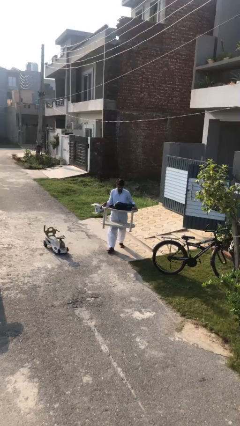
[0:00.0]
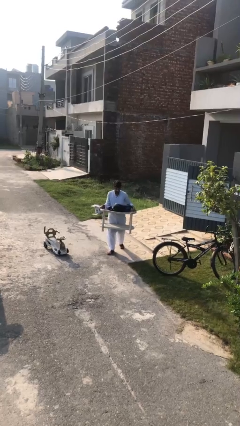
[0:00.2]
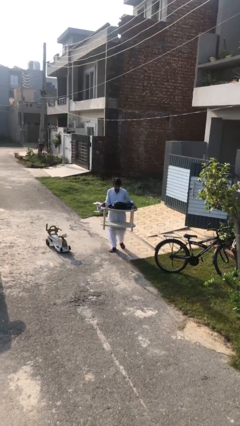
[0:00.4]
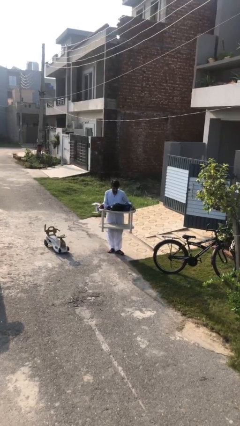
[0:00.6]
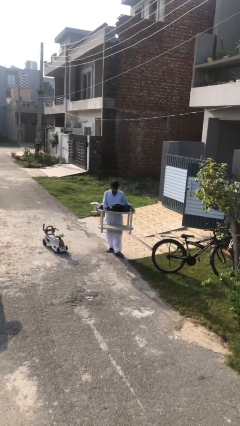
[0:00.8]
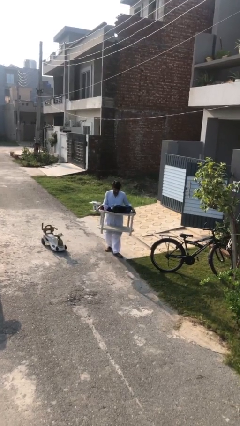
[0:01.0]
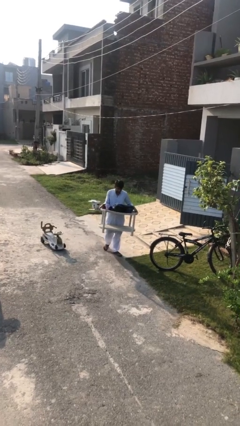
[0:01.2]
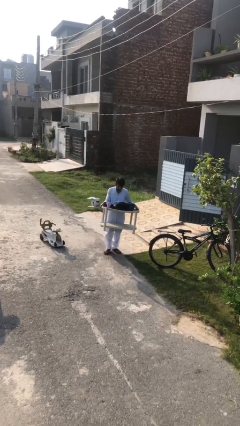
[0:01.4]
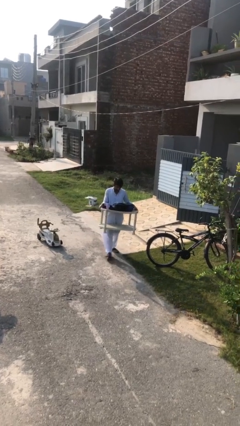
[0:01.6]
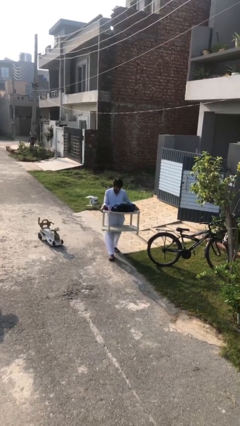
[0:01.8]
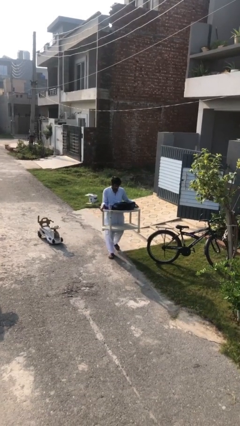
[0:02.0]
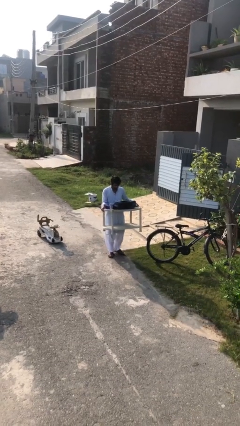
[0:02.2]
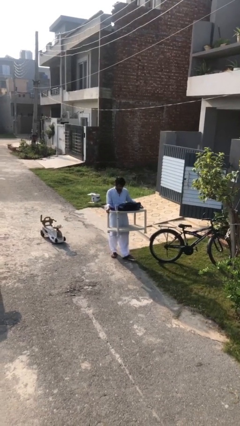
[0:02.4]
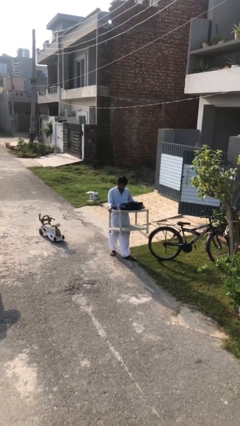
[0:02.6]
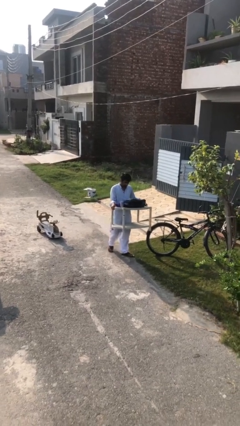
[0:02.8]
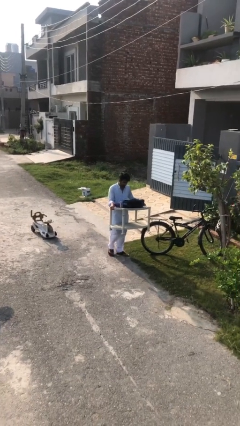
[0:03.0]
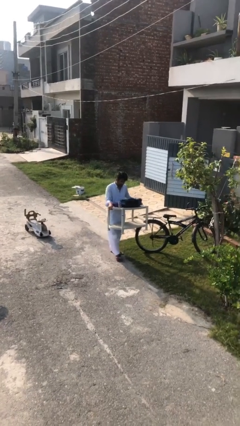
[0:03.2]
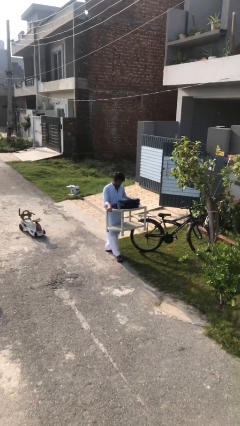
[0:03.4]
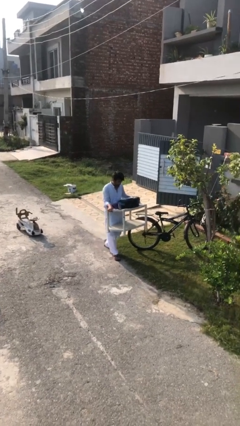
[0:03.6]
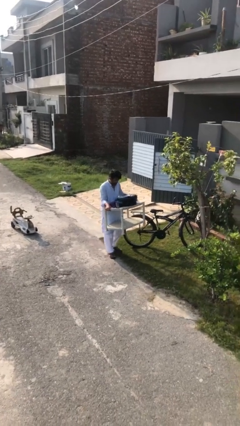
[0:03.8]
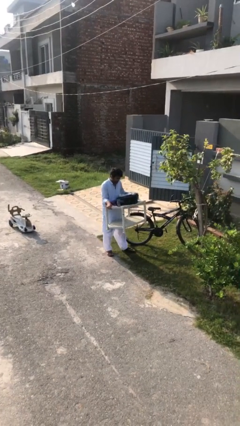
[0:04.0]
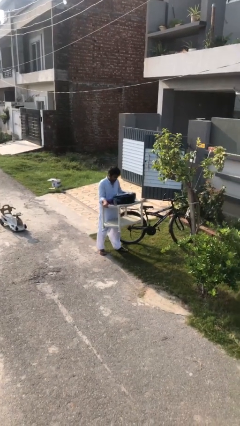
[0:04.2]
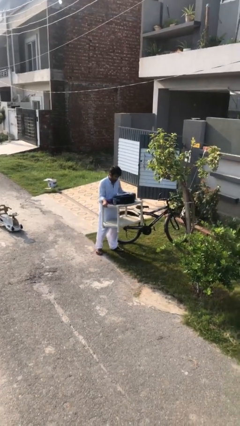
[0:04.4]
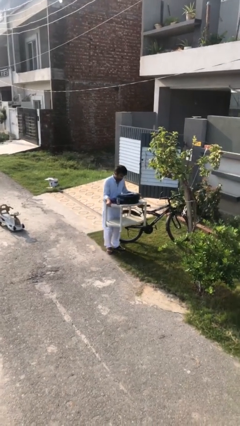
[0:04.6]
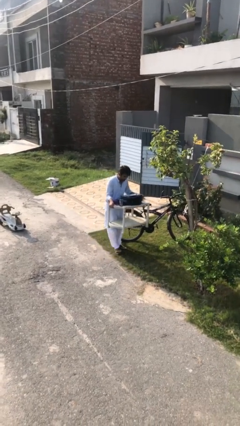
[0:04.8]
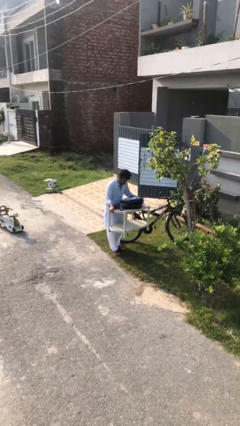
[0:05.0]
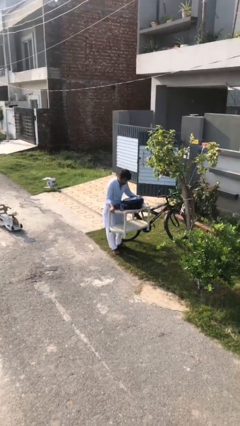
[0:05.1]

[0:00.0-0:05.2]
person carries heavy object

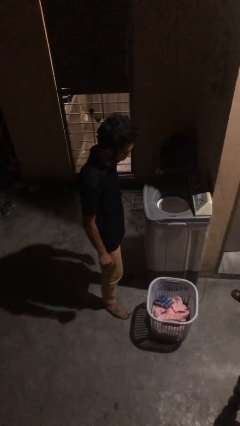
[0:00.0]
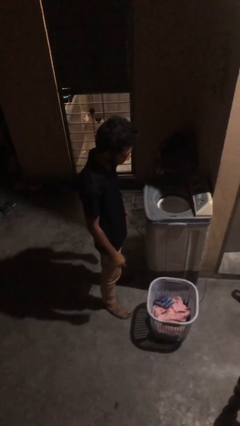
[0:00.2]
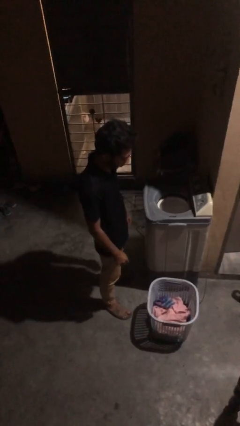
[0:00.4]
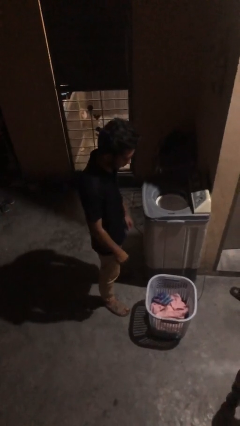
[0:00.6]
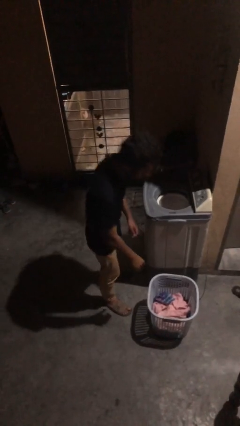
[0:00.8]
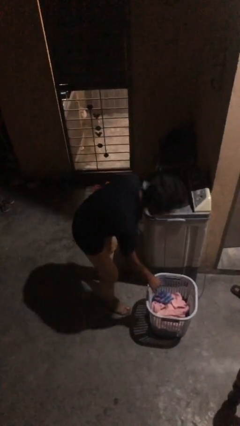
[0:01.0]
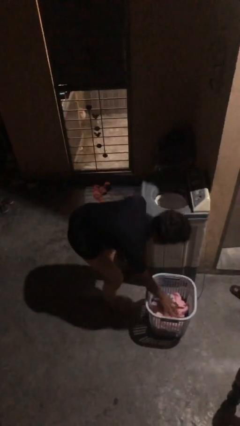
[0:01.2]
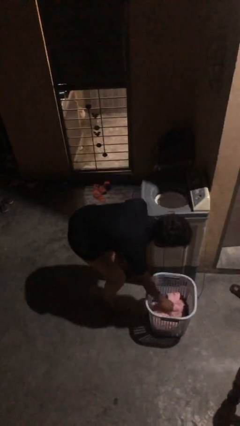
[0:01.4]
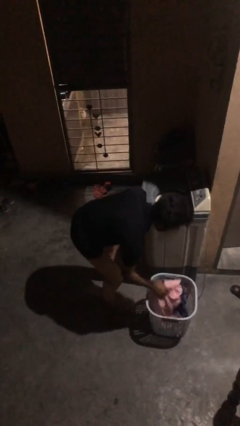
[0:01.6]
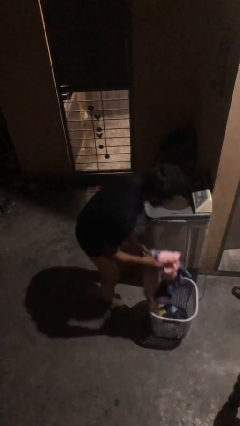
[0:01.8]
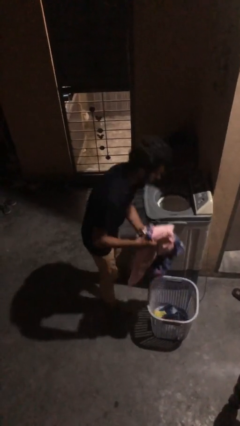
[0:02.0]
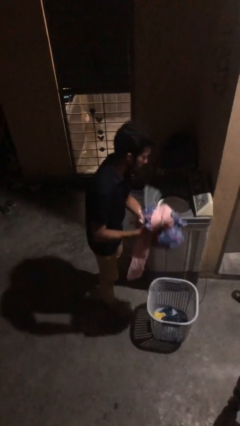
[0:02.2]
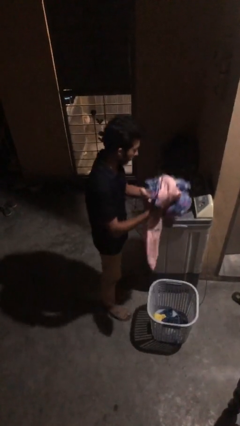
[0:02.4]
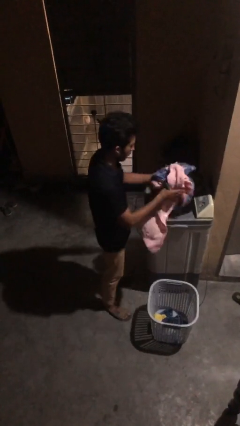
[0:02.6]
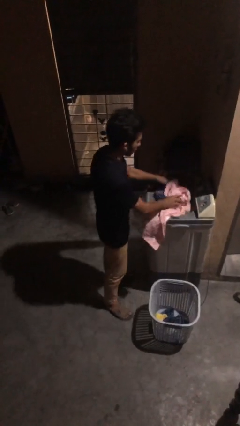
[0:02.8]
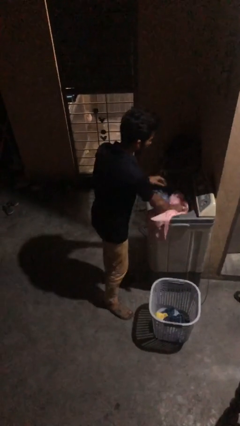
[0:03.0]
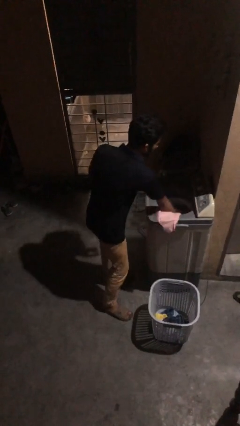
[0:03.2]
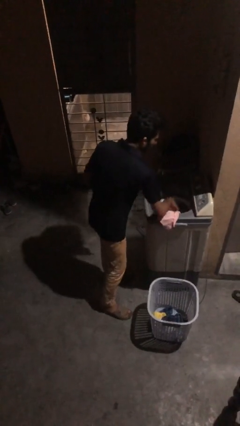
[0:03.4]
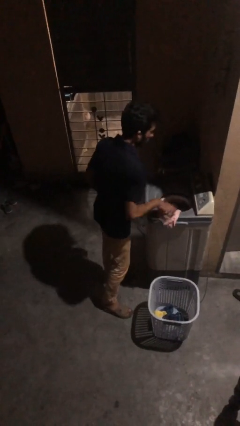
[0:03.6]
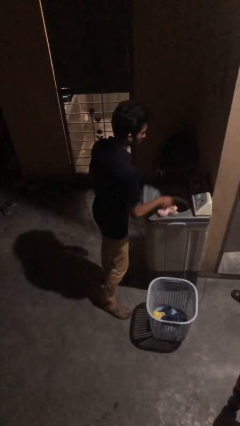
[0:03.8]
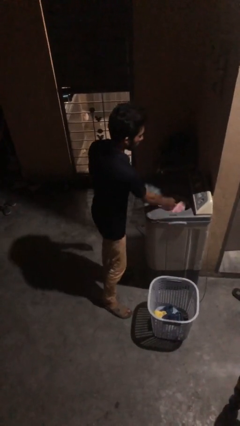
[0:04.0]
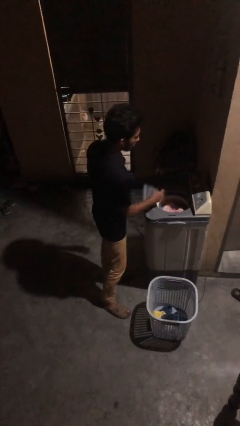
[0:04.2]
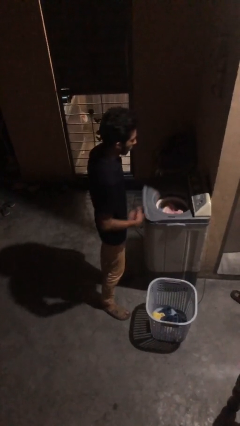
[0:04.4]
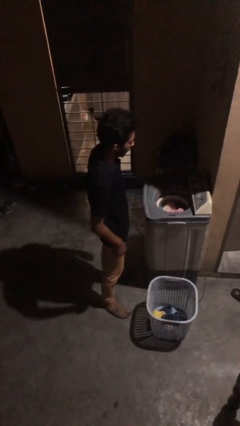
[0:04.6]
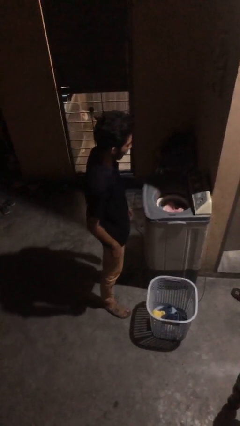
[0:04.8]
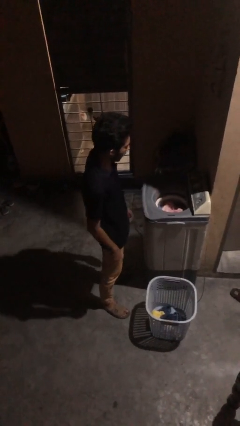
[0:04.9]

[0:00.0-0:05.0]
person loads dryer

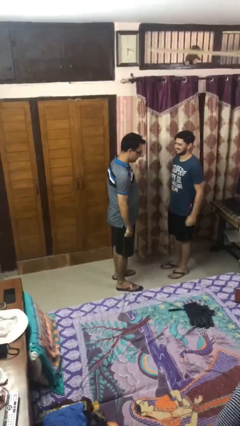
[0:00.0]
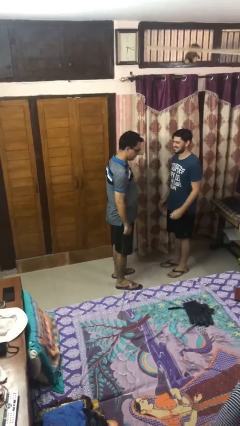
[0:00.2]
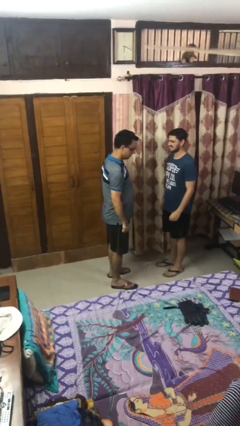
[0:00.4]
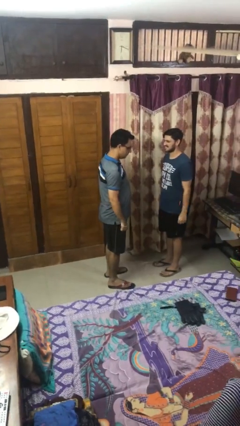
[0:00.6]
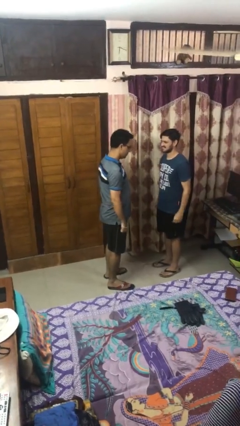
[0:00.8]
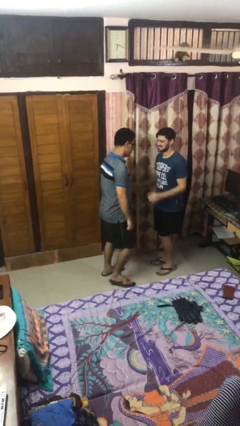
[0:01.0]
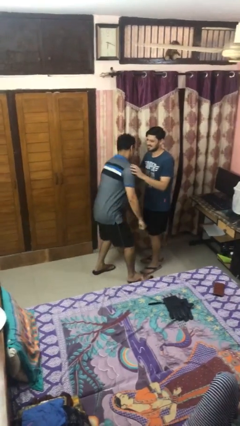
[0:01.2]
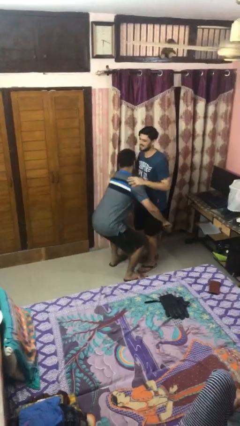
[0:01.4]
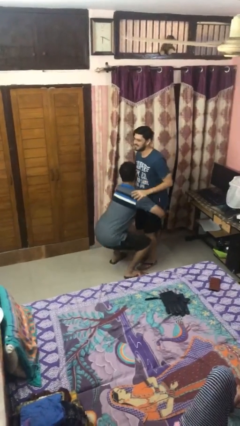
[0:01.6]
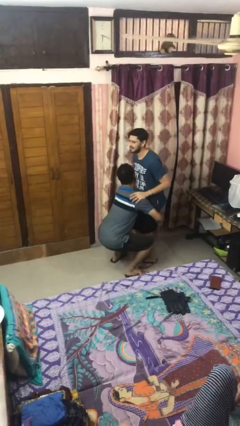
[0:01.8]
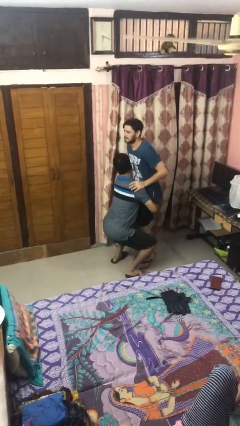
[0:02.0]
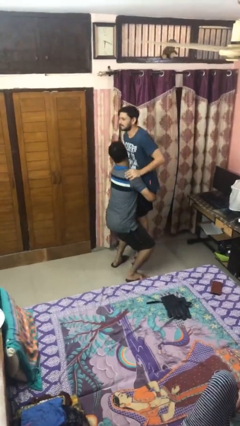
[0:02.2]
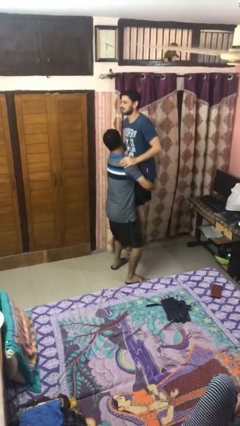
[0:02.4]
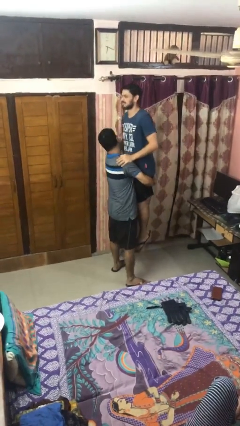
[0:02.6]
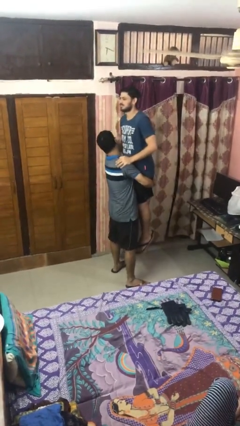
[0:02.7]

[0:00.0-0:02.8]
person picks up person

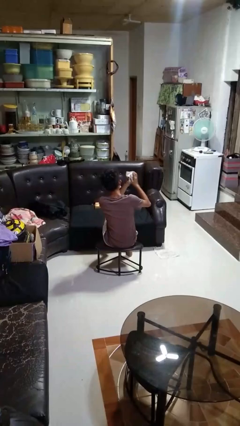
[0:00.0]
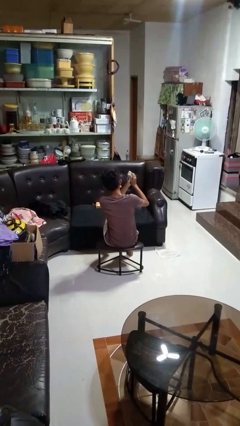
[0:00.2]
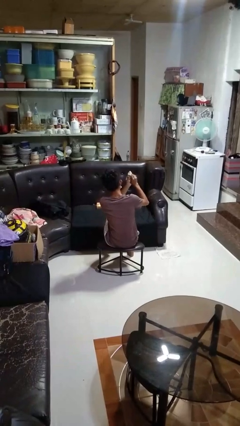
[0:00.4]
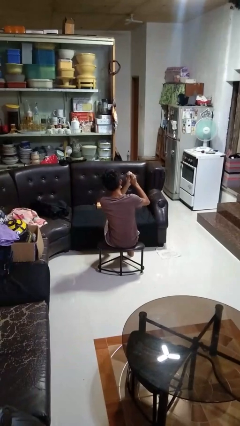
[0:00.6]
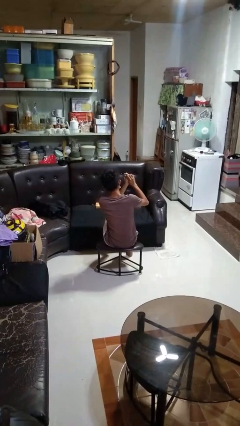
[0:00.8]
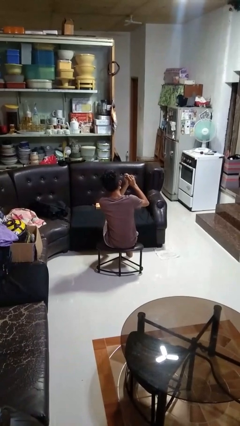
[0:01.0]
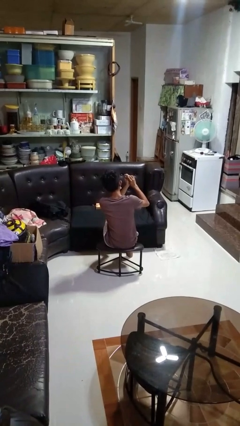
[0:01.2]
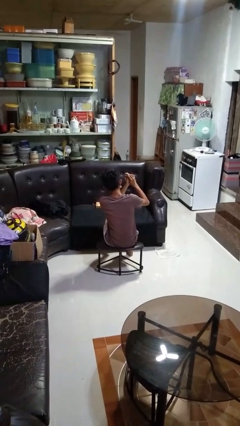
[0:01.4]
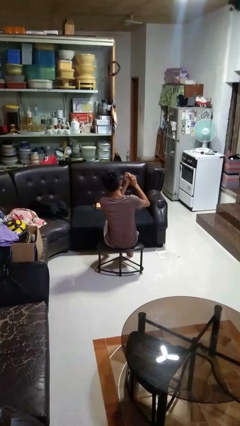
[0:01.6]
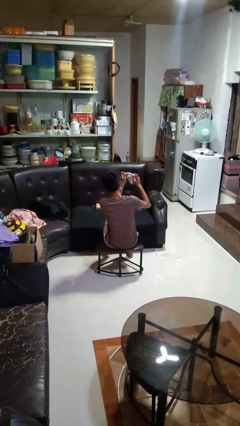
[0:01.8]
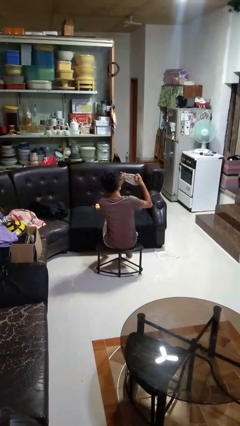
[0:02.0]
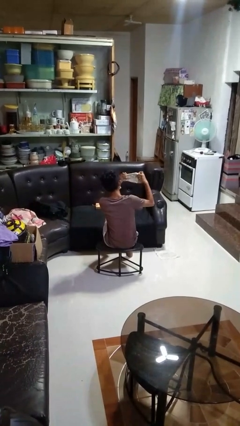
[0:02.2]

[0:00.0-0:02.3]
person crumples paper

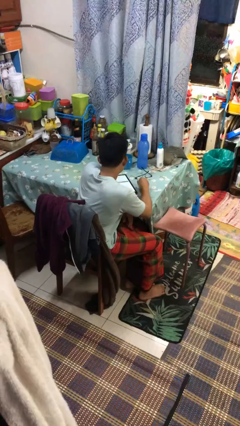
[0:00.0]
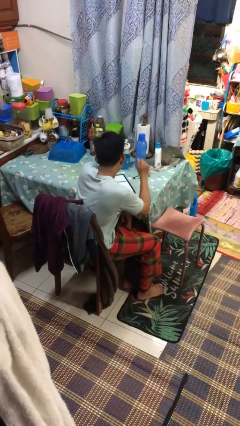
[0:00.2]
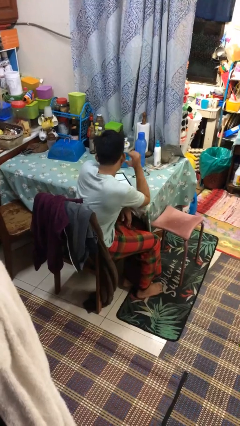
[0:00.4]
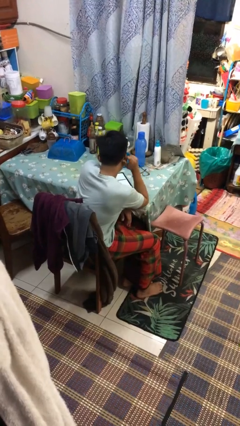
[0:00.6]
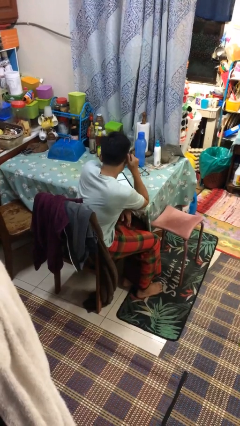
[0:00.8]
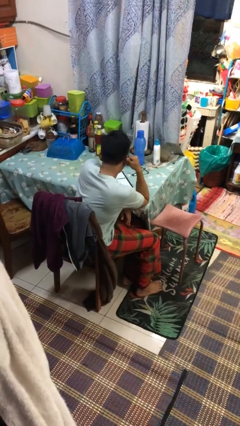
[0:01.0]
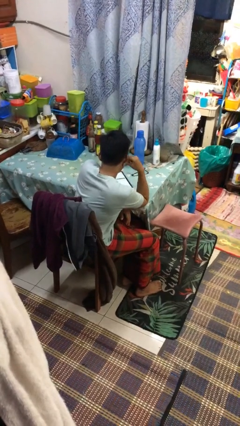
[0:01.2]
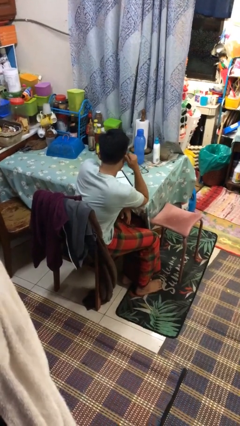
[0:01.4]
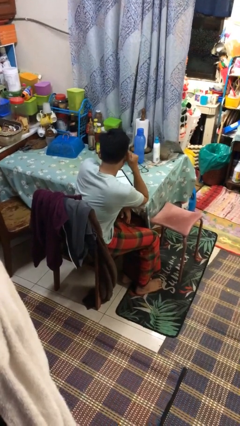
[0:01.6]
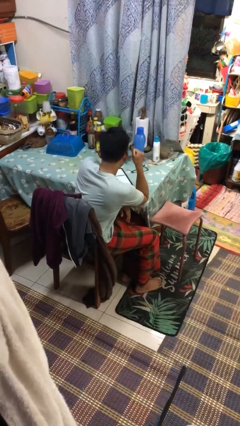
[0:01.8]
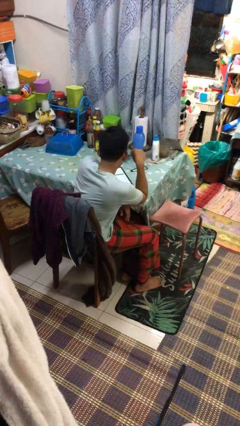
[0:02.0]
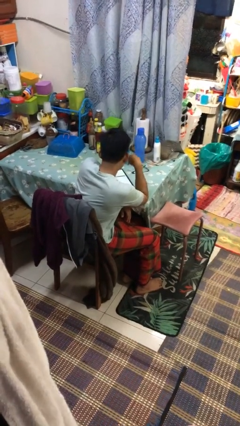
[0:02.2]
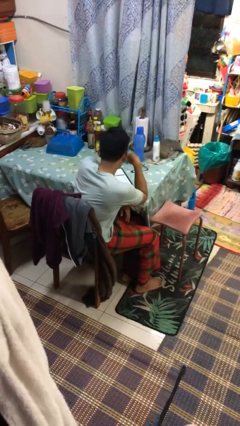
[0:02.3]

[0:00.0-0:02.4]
person touches earlobe
